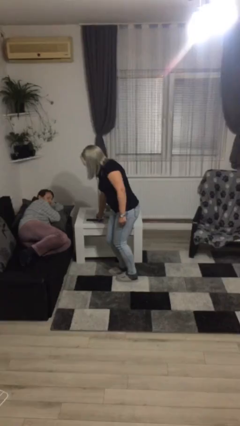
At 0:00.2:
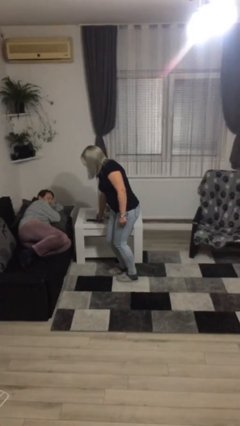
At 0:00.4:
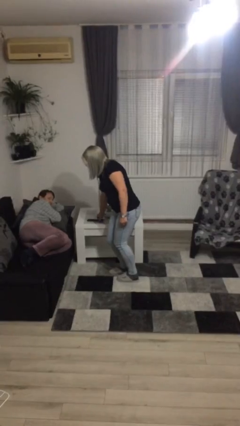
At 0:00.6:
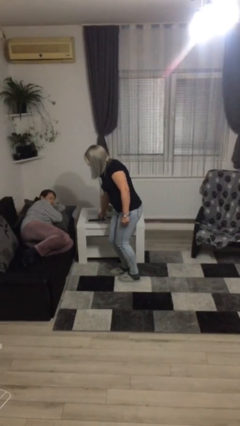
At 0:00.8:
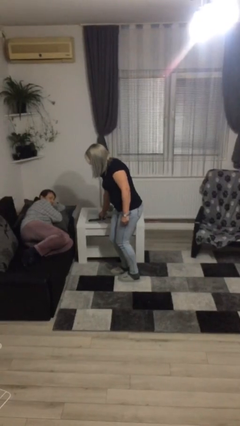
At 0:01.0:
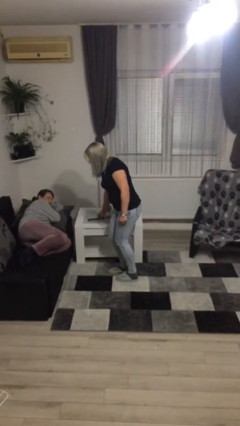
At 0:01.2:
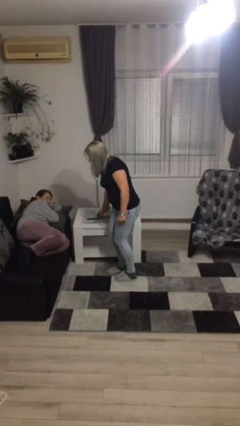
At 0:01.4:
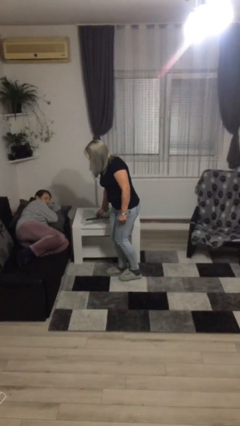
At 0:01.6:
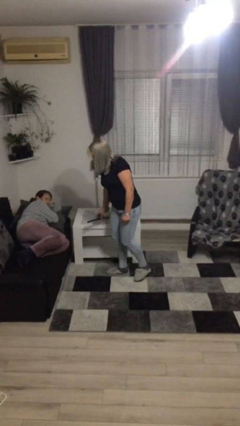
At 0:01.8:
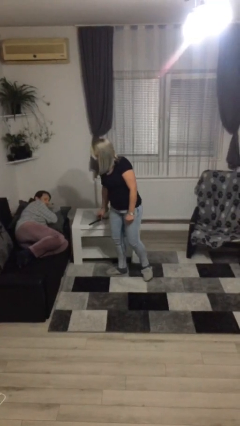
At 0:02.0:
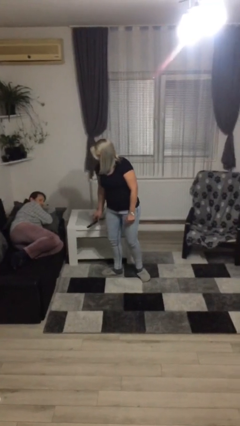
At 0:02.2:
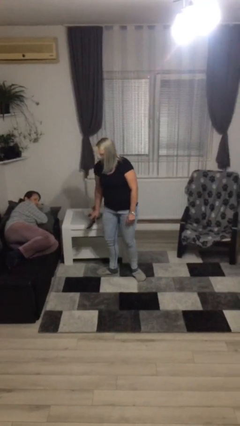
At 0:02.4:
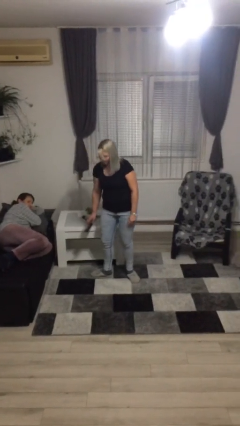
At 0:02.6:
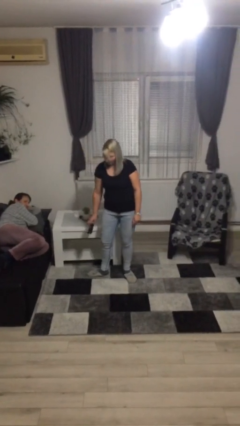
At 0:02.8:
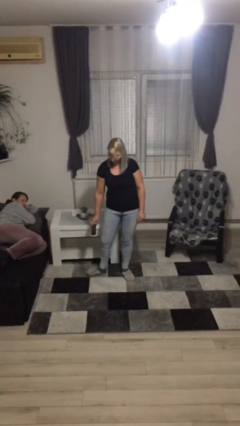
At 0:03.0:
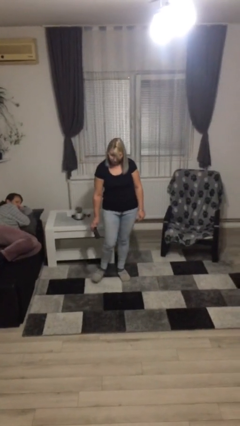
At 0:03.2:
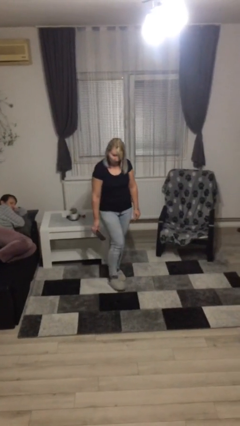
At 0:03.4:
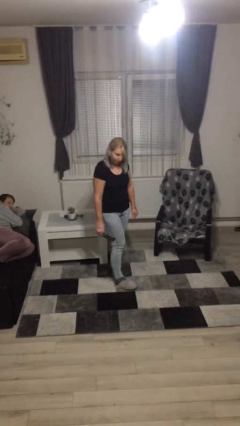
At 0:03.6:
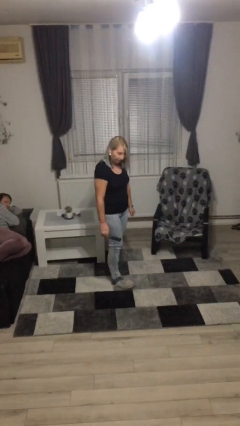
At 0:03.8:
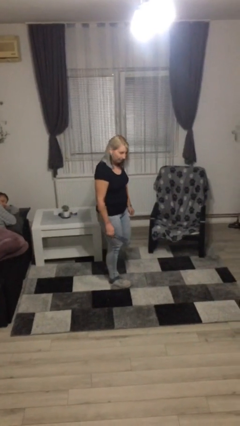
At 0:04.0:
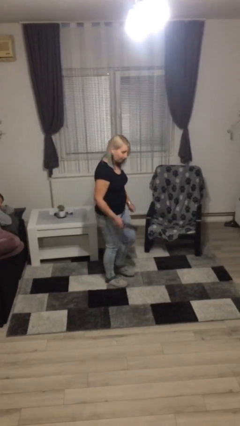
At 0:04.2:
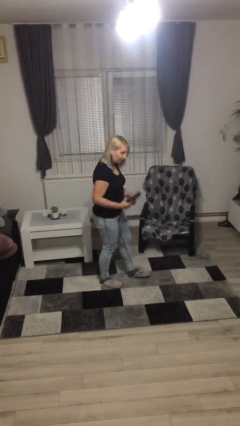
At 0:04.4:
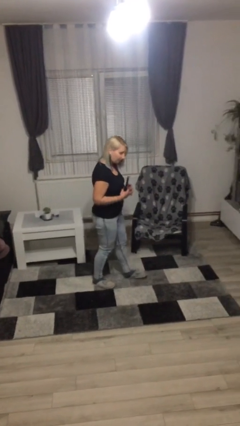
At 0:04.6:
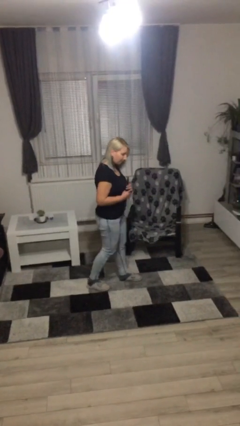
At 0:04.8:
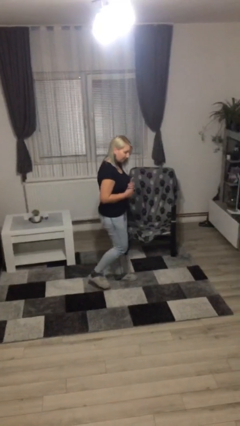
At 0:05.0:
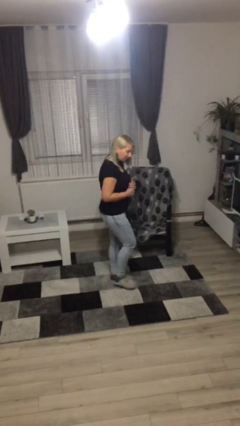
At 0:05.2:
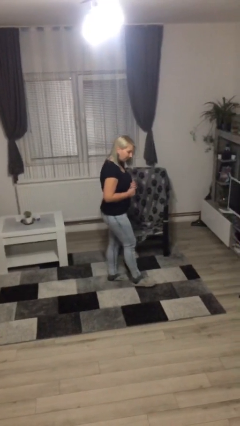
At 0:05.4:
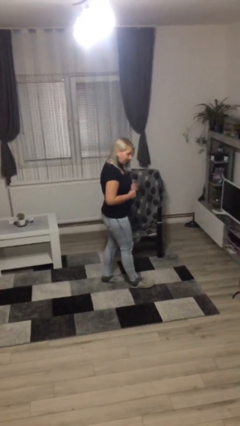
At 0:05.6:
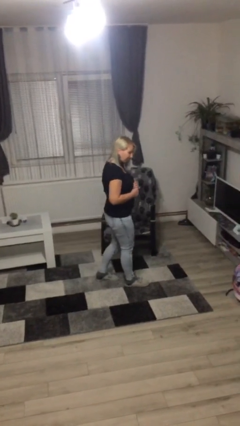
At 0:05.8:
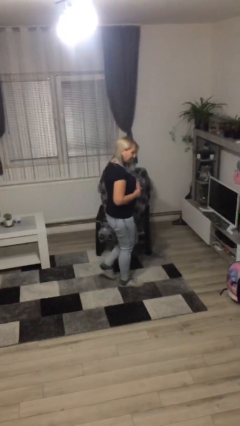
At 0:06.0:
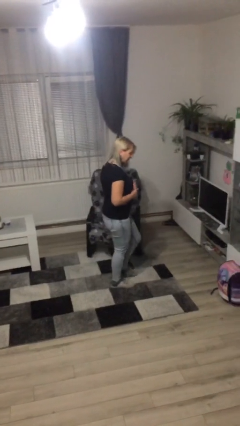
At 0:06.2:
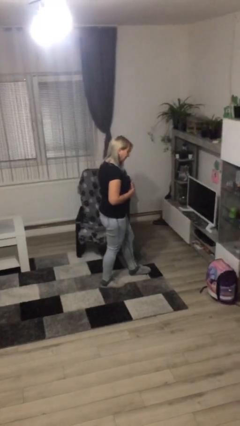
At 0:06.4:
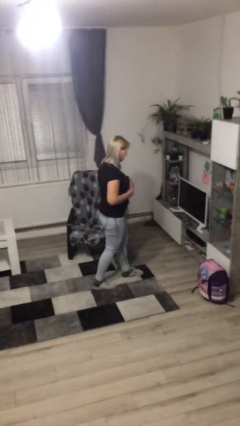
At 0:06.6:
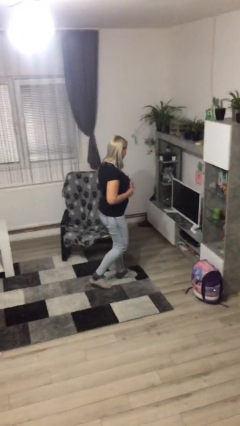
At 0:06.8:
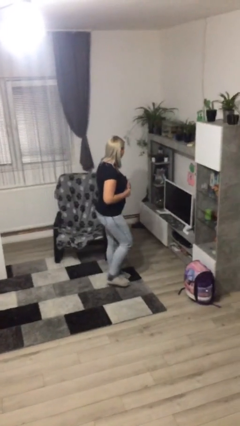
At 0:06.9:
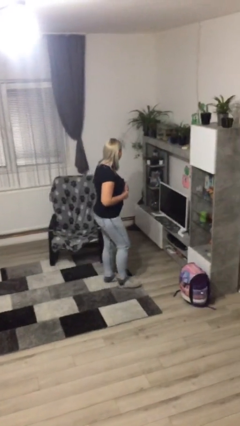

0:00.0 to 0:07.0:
person steals object from person

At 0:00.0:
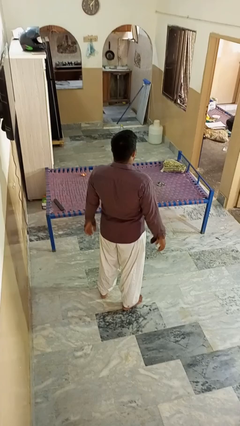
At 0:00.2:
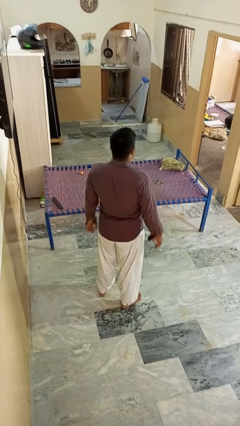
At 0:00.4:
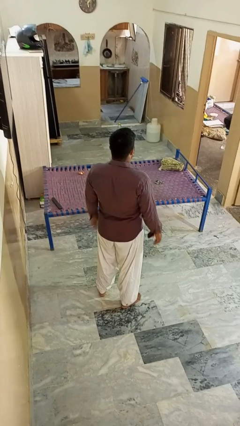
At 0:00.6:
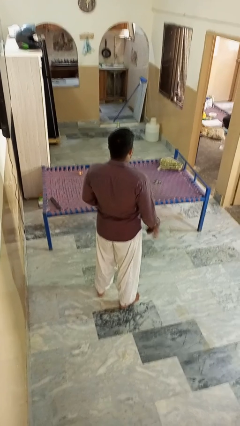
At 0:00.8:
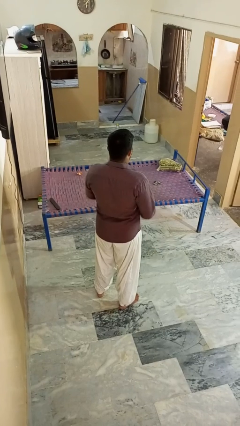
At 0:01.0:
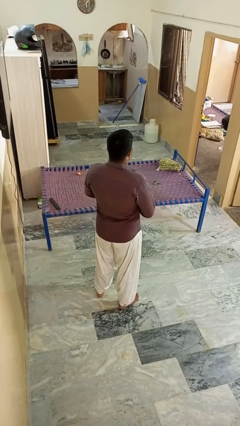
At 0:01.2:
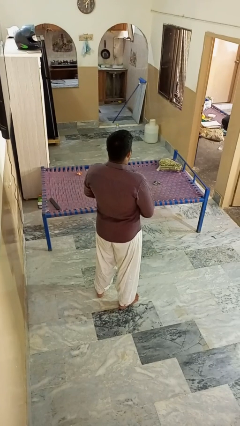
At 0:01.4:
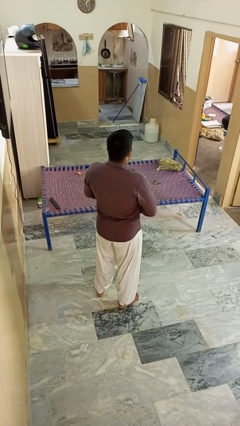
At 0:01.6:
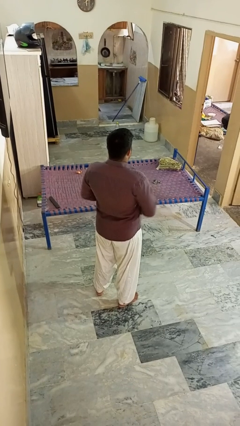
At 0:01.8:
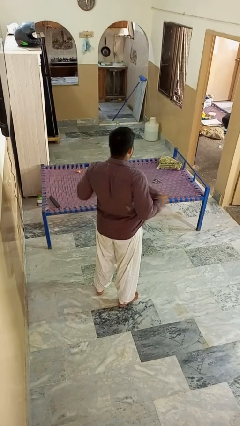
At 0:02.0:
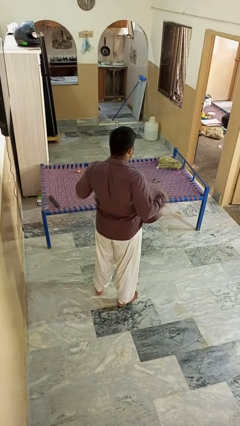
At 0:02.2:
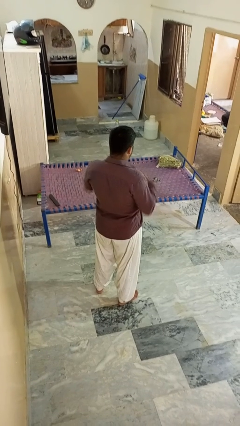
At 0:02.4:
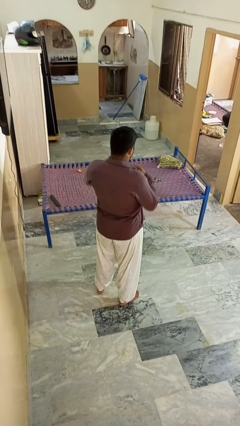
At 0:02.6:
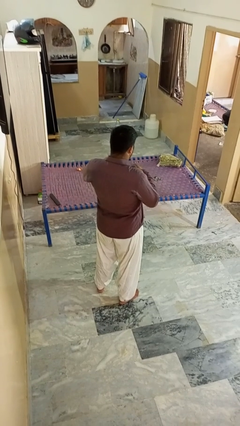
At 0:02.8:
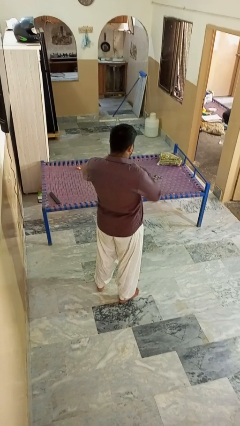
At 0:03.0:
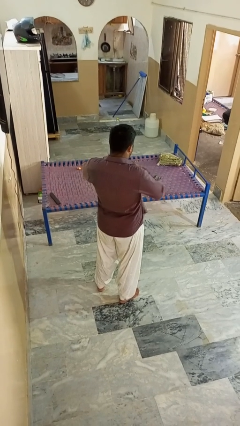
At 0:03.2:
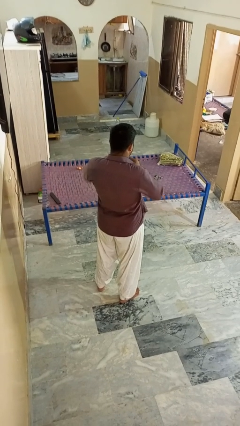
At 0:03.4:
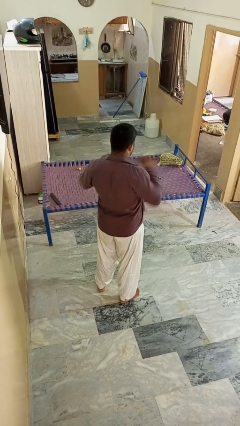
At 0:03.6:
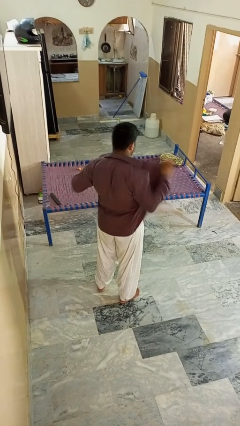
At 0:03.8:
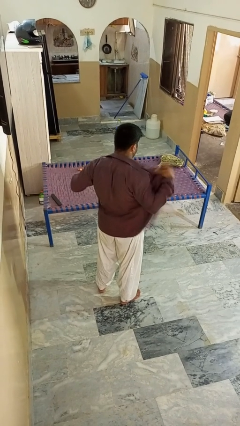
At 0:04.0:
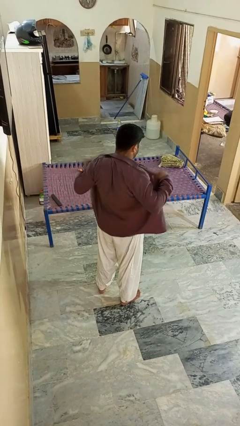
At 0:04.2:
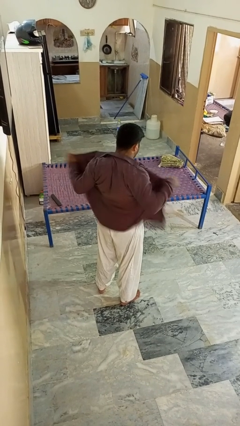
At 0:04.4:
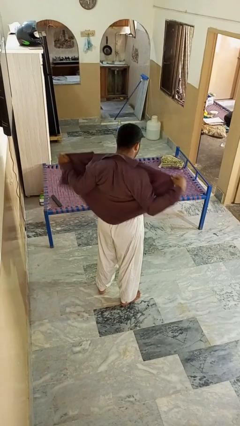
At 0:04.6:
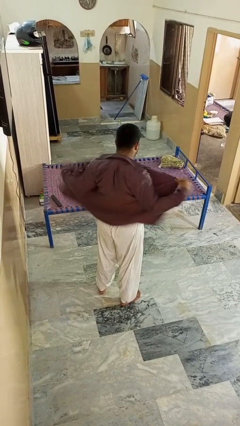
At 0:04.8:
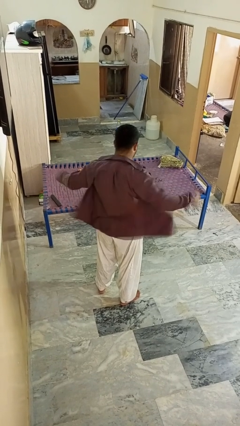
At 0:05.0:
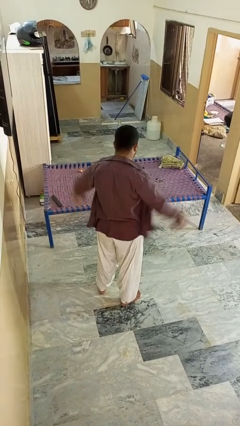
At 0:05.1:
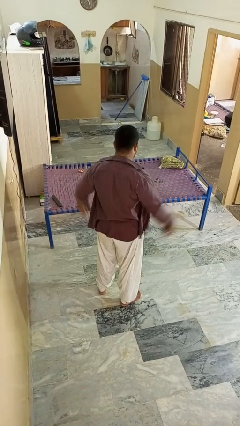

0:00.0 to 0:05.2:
person unbuttons shirt

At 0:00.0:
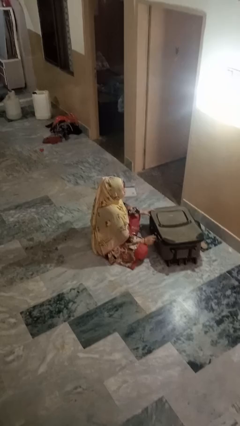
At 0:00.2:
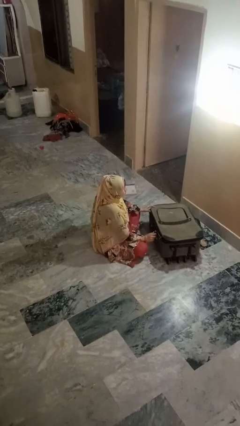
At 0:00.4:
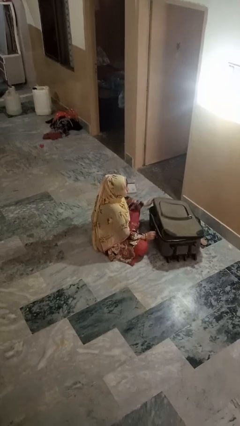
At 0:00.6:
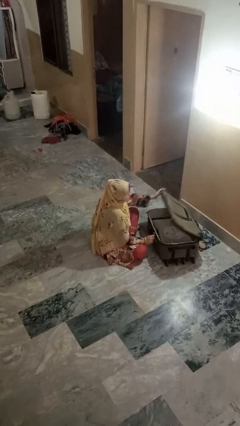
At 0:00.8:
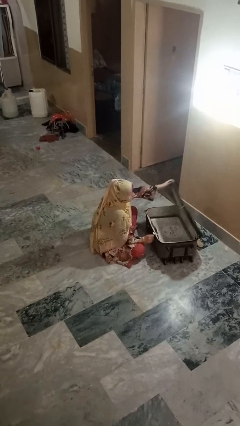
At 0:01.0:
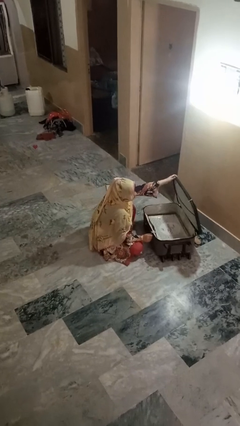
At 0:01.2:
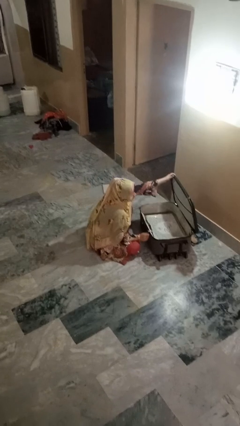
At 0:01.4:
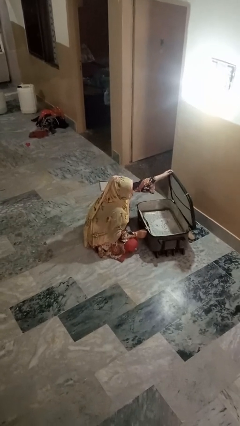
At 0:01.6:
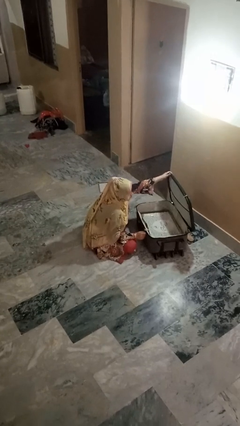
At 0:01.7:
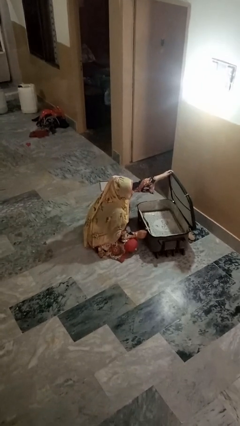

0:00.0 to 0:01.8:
person opens suitcase

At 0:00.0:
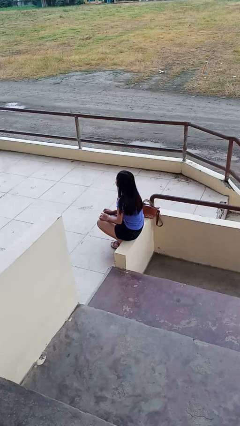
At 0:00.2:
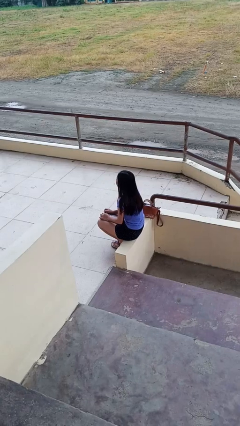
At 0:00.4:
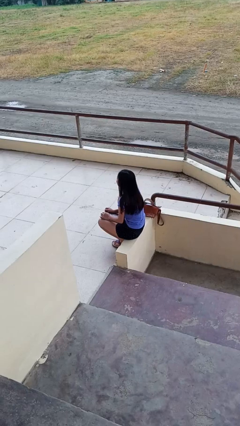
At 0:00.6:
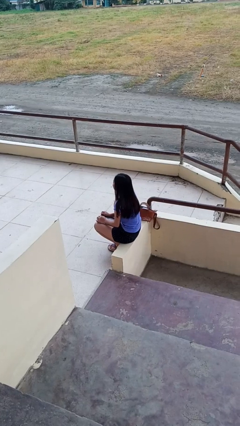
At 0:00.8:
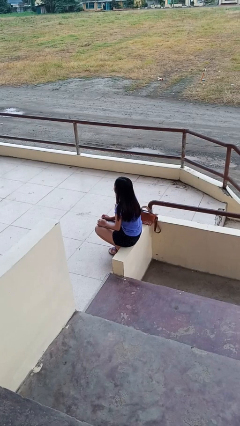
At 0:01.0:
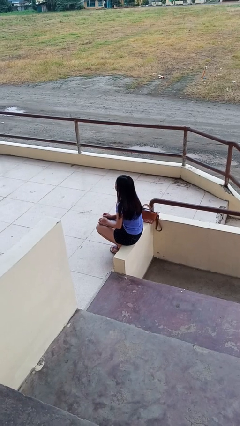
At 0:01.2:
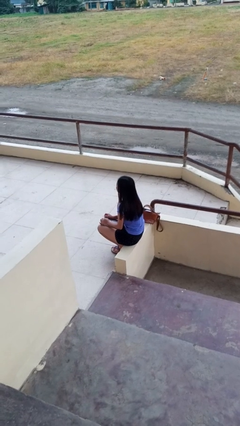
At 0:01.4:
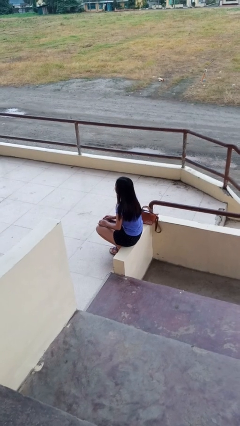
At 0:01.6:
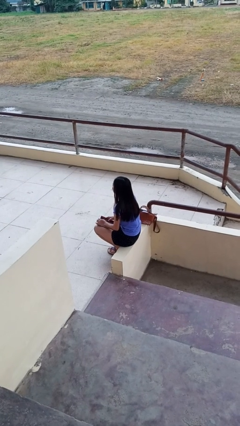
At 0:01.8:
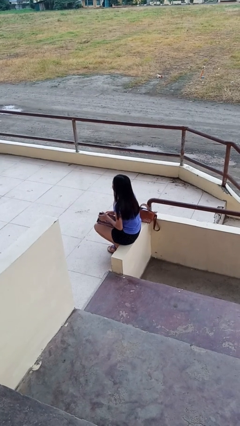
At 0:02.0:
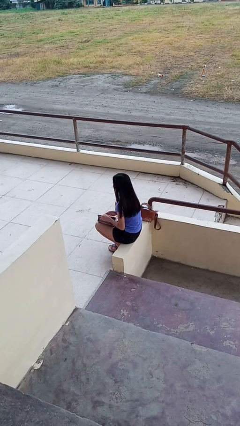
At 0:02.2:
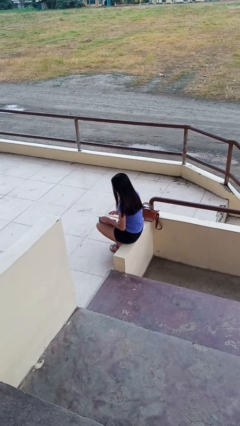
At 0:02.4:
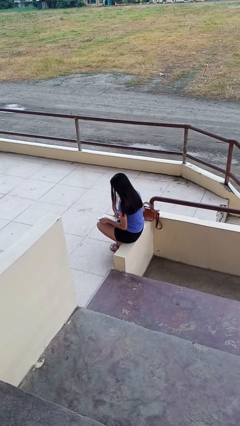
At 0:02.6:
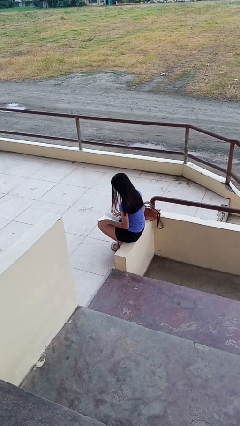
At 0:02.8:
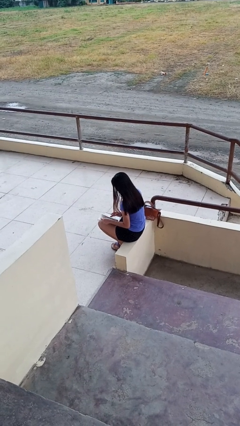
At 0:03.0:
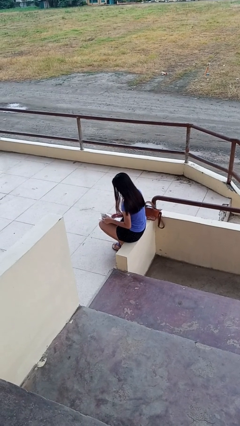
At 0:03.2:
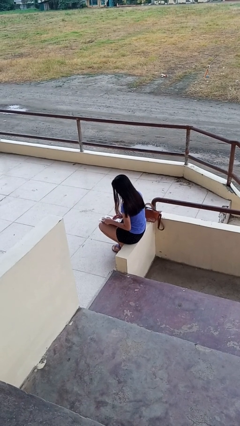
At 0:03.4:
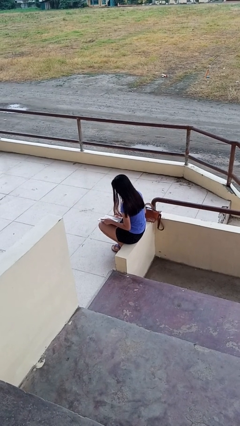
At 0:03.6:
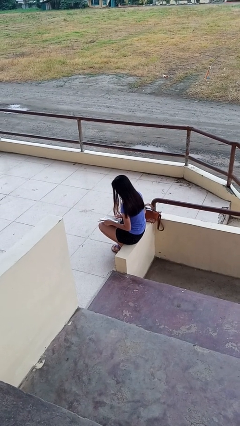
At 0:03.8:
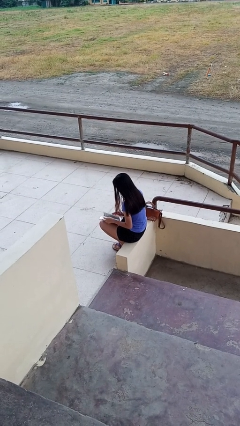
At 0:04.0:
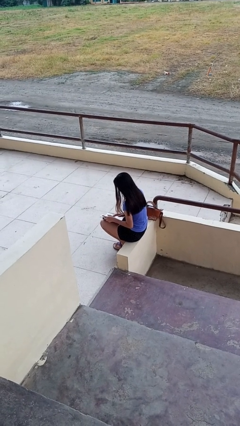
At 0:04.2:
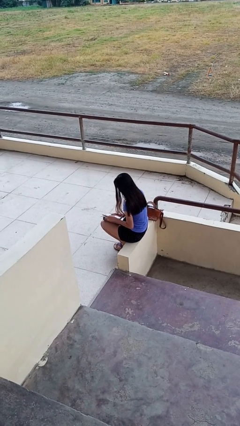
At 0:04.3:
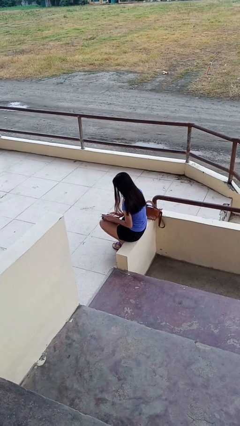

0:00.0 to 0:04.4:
person reads book
